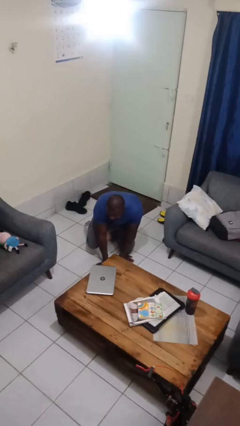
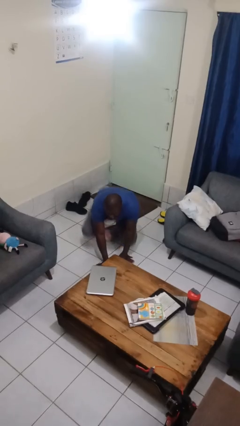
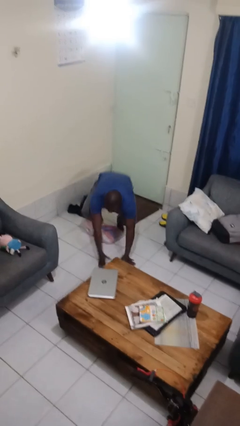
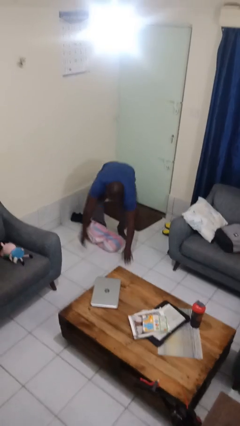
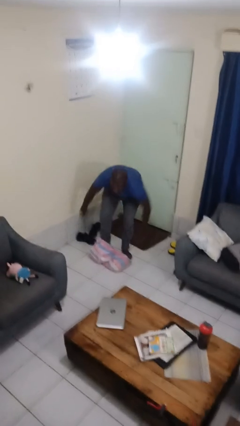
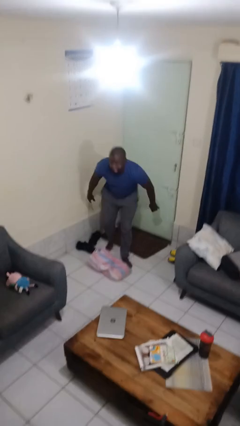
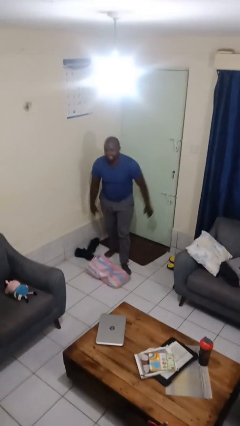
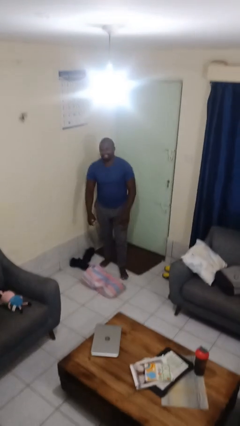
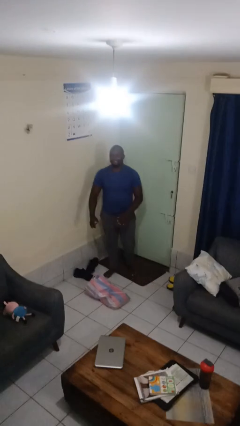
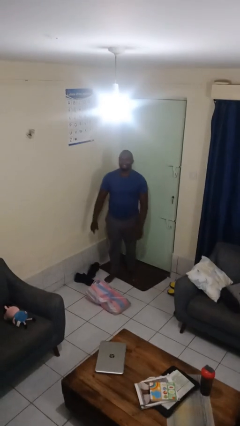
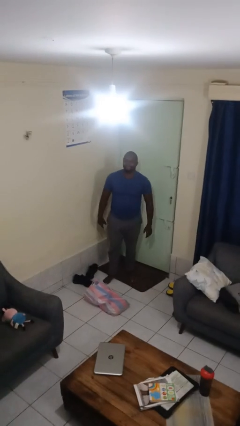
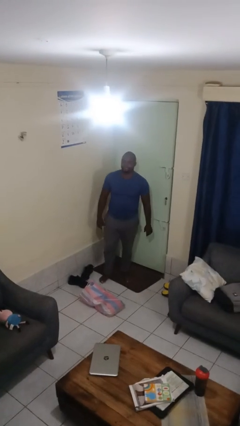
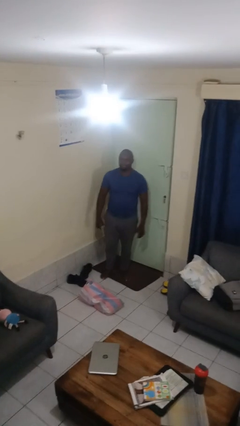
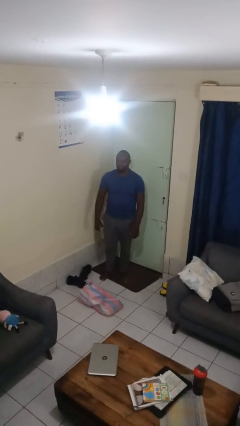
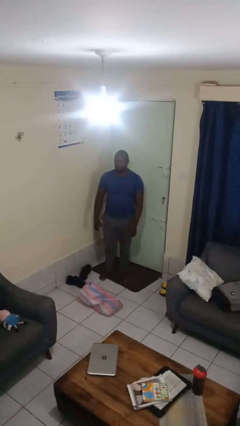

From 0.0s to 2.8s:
person stands up from floor

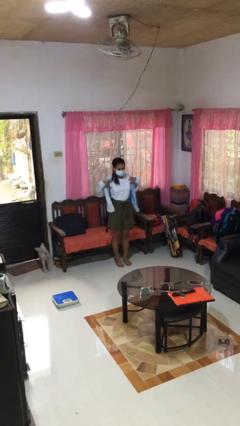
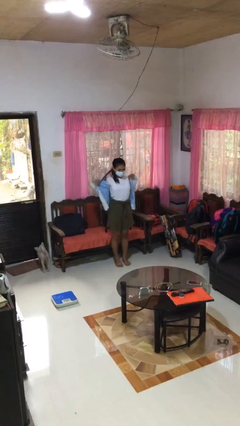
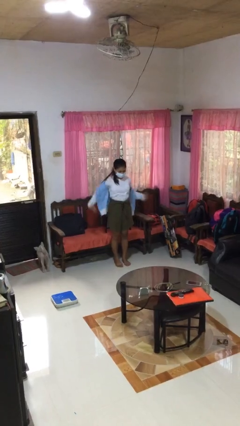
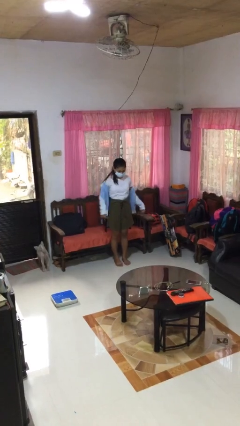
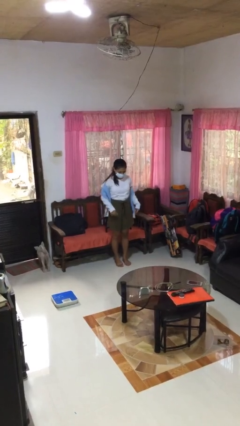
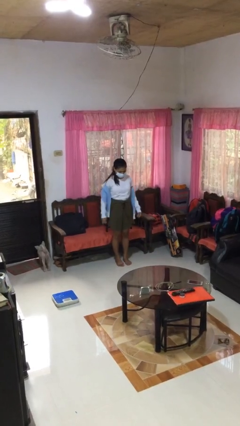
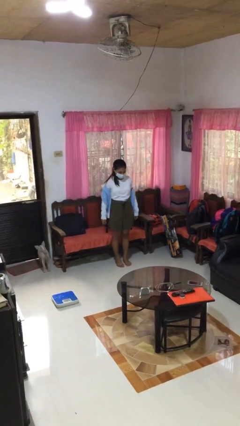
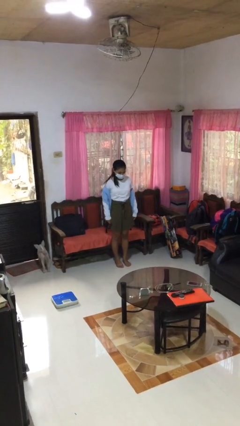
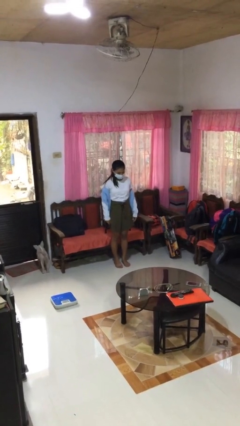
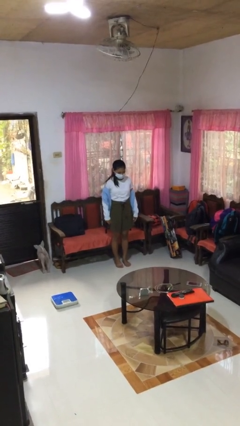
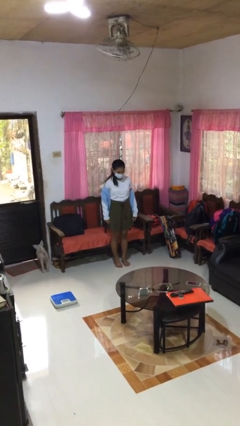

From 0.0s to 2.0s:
person takes off jacket

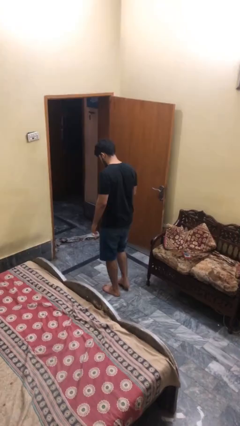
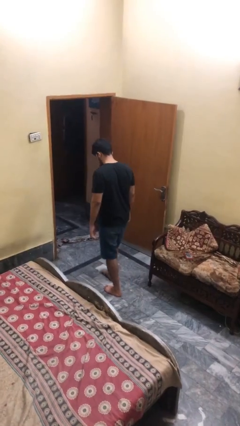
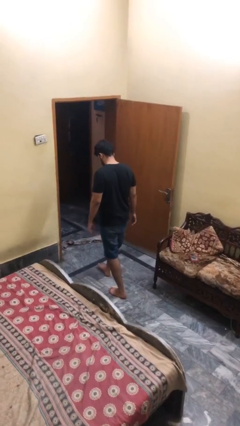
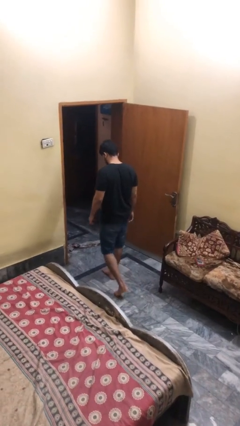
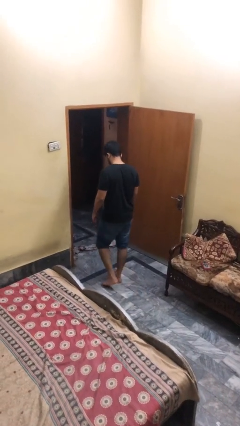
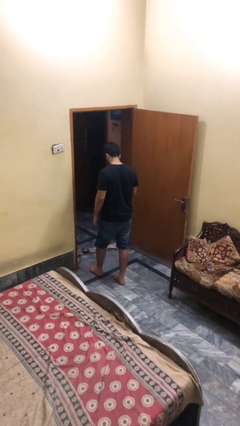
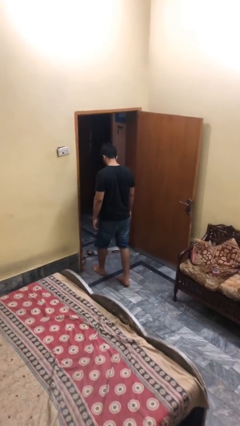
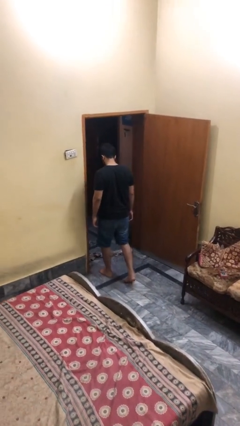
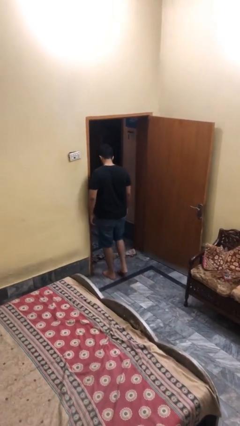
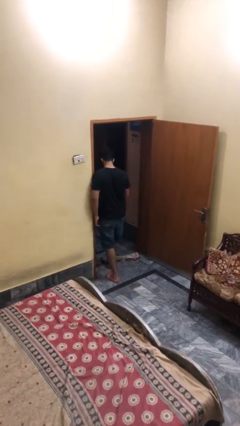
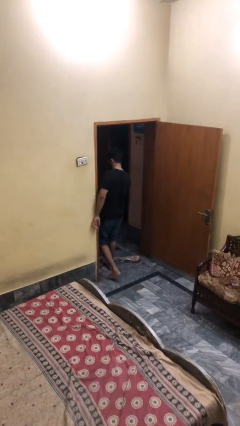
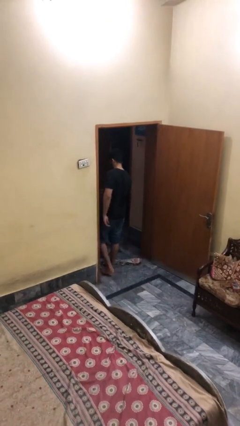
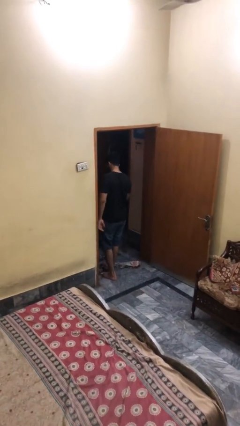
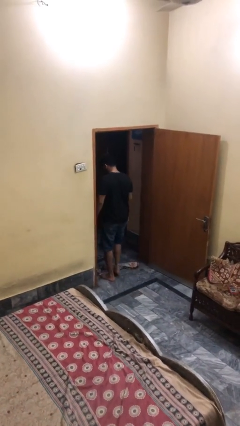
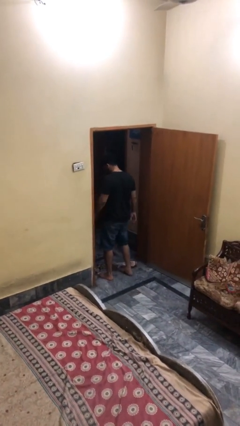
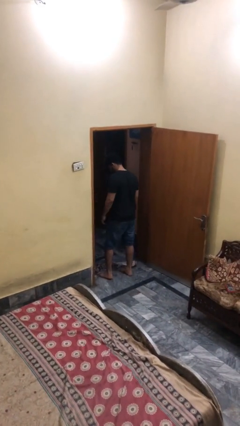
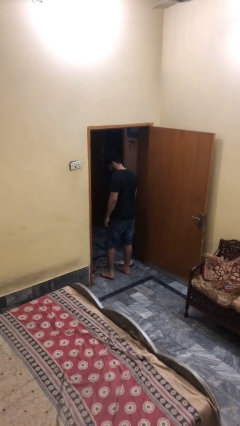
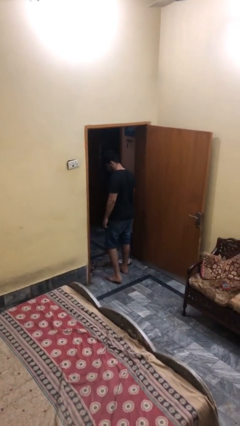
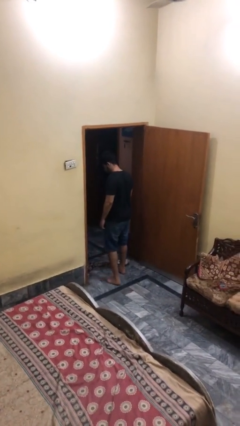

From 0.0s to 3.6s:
person bumps into wall

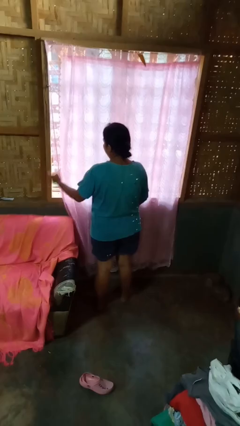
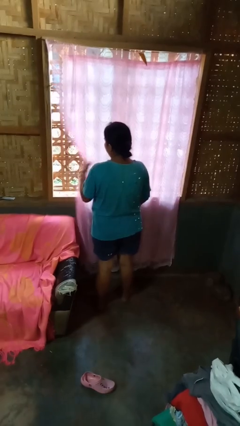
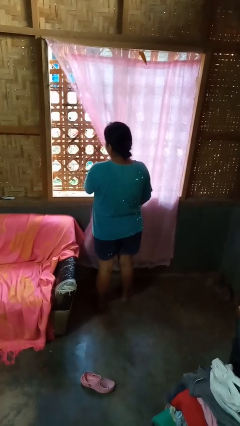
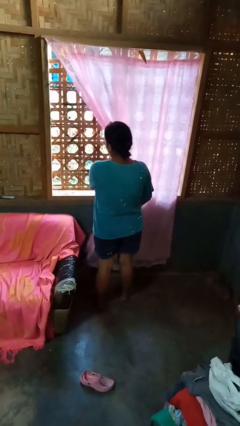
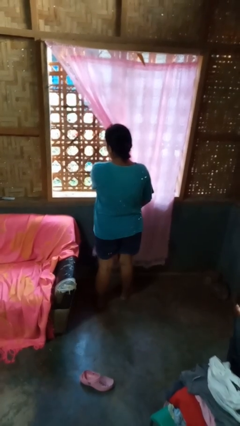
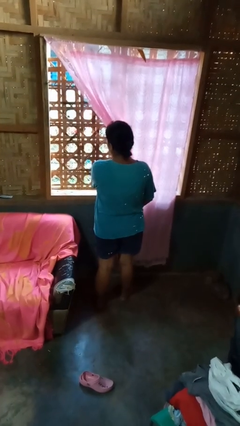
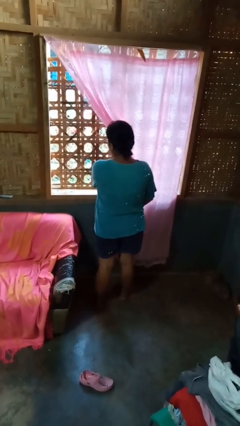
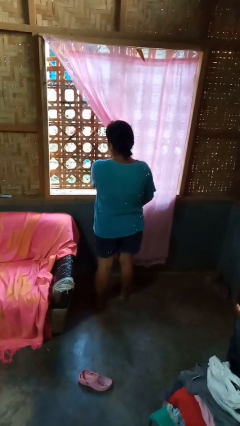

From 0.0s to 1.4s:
person opens curtains

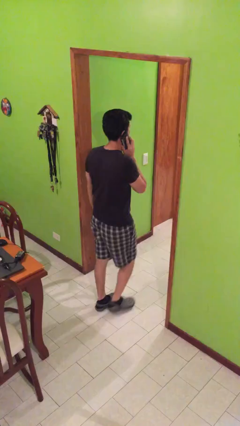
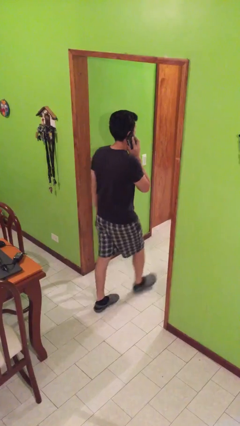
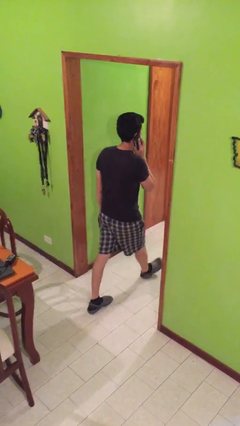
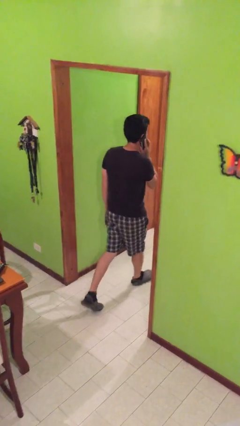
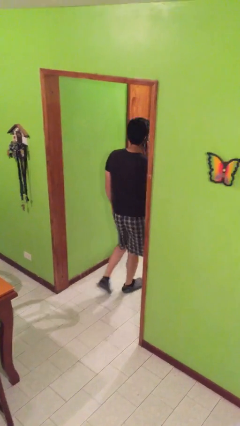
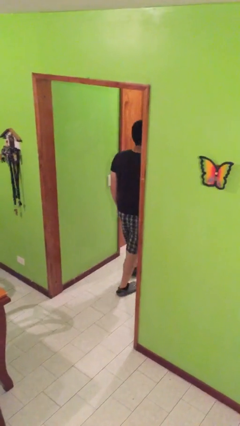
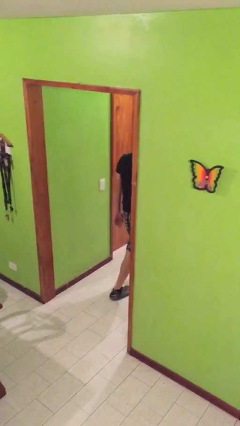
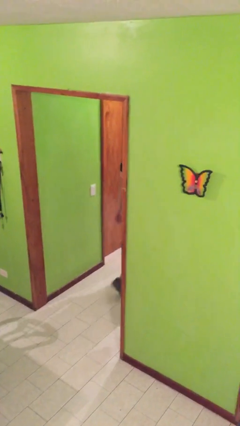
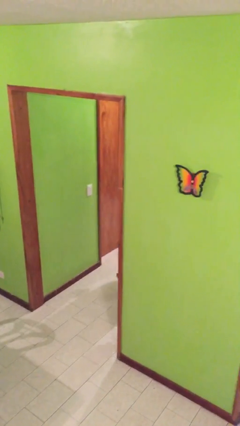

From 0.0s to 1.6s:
person exits scene through structure

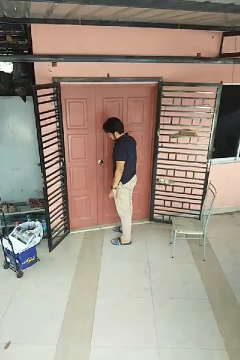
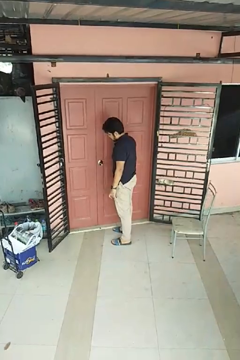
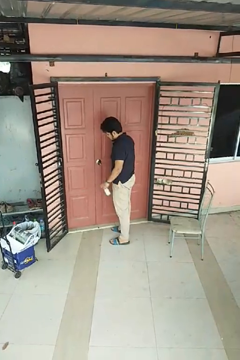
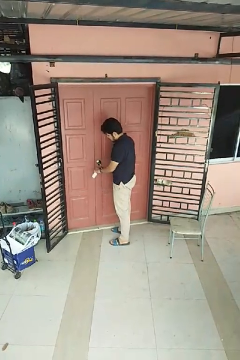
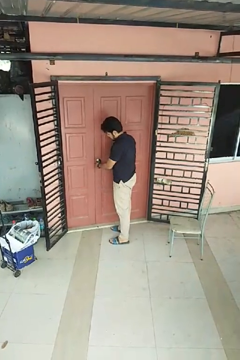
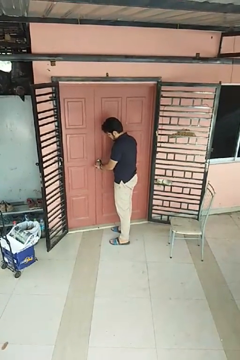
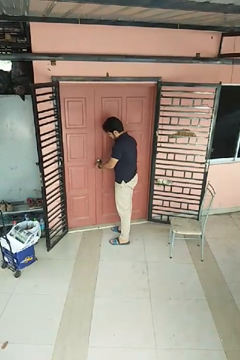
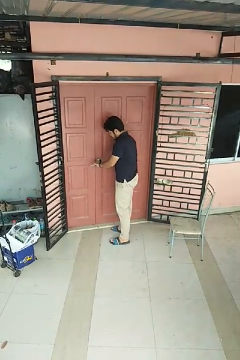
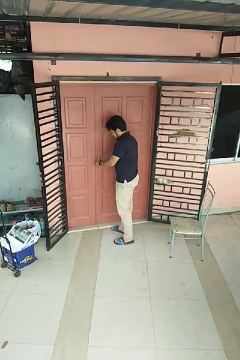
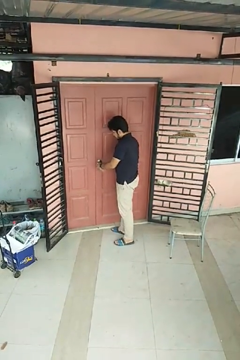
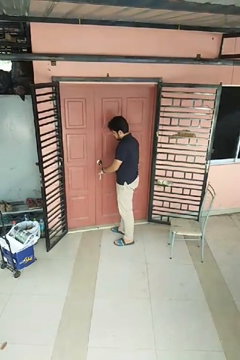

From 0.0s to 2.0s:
person unlocks door with keys

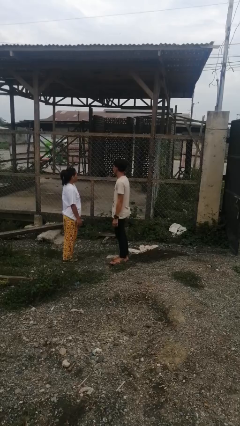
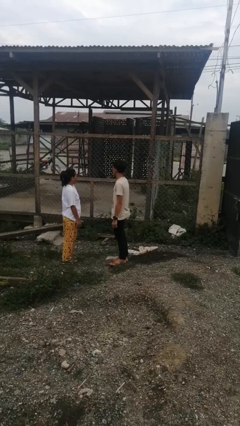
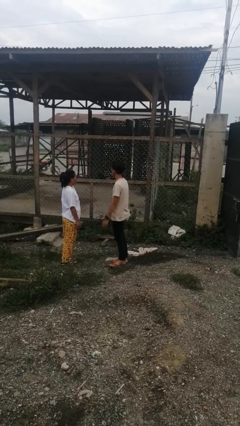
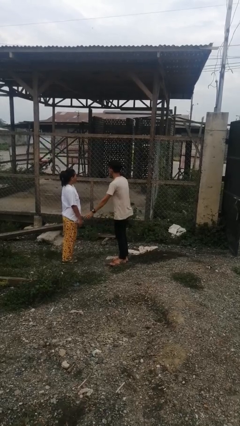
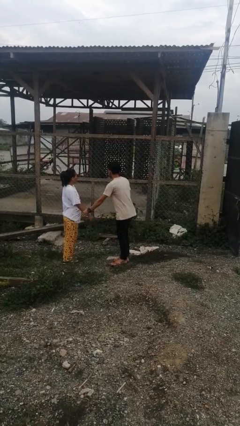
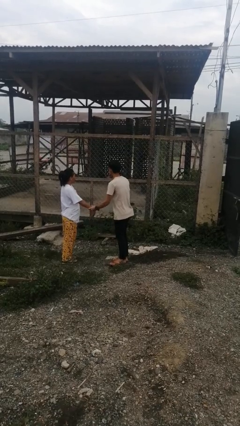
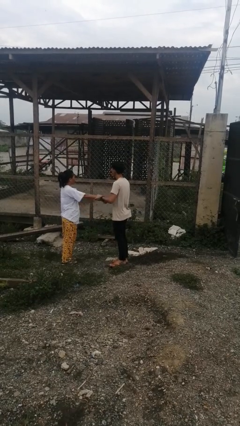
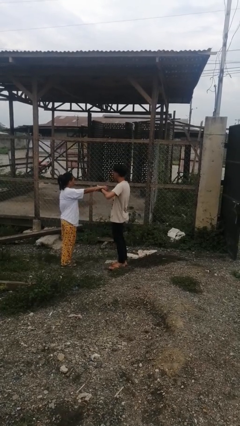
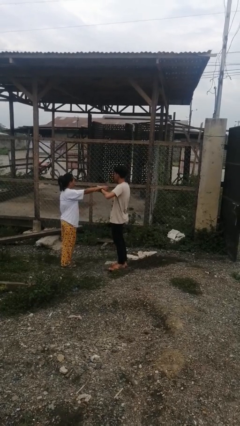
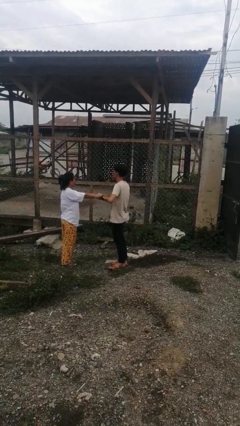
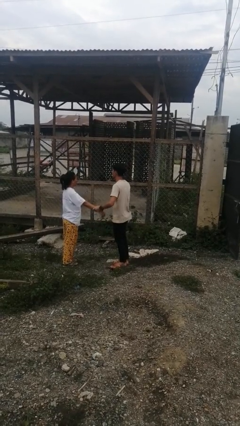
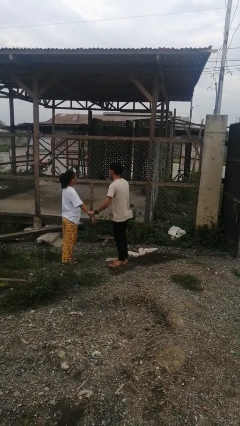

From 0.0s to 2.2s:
person grabs person by forearm

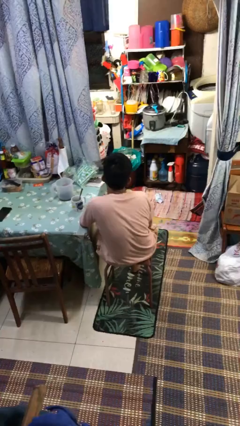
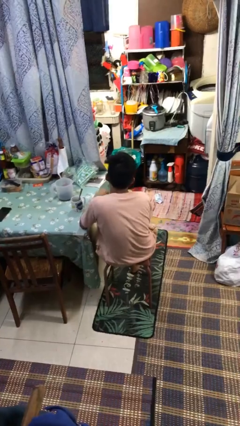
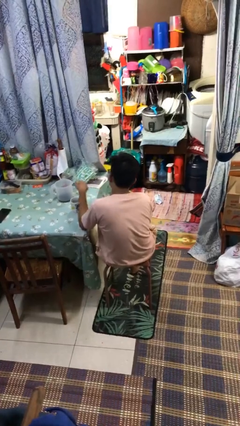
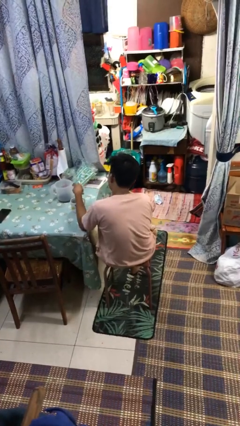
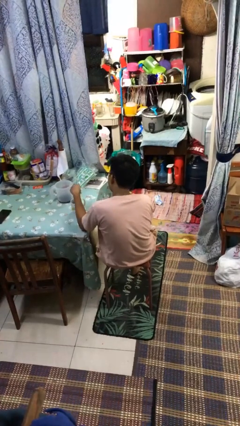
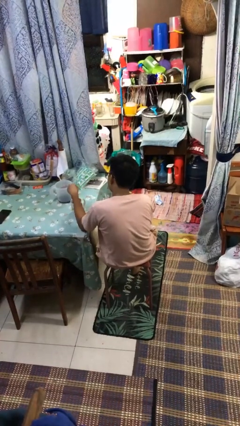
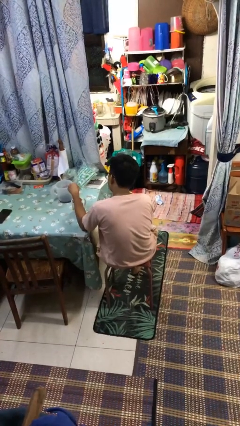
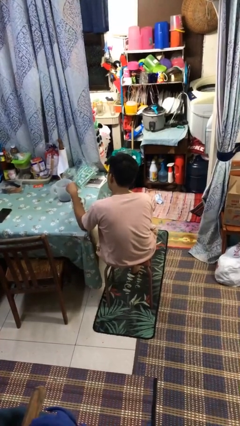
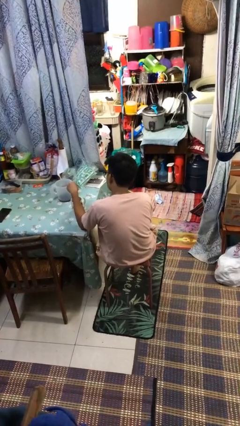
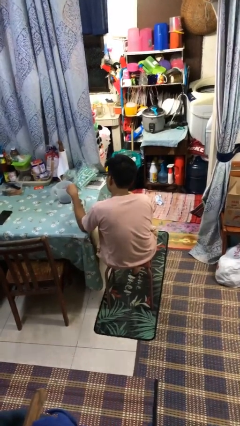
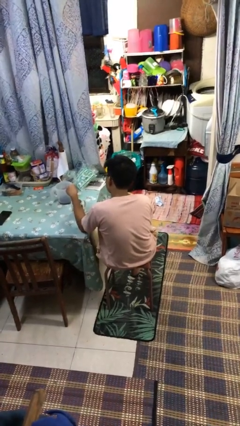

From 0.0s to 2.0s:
person stirs mug
